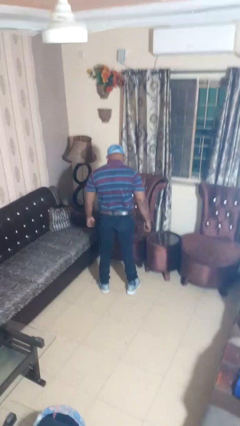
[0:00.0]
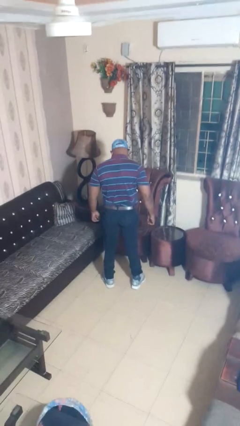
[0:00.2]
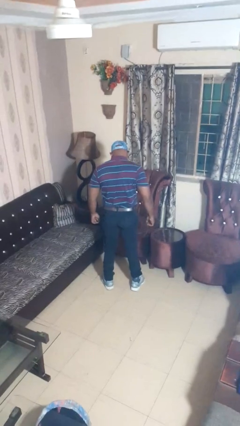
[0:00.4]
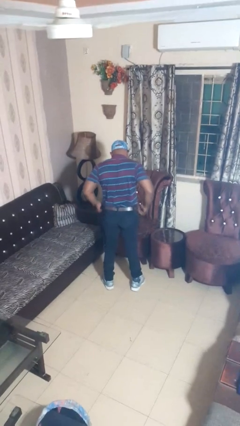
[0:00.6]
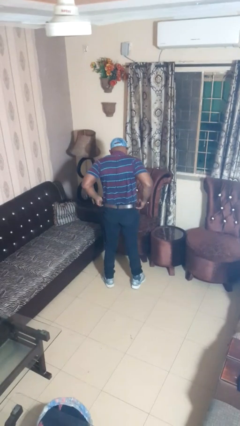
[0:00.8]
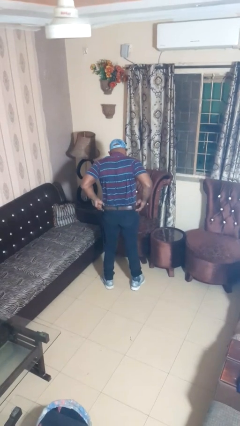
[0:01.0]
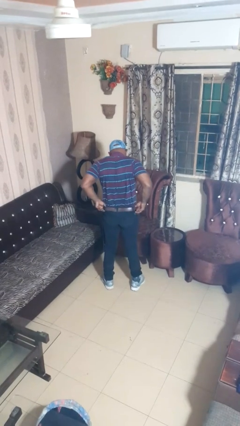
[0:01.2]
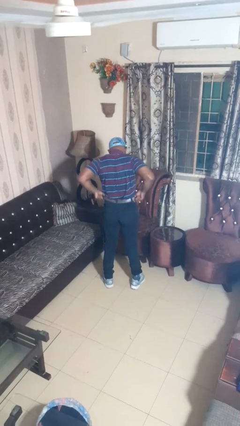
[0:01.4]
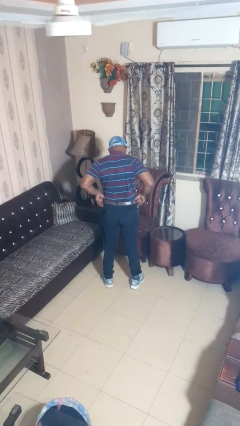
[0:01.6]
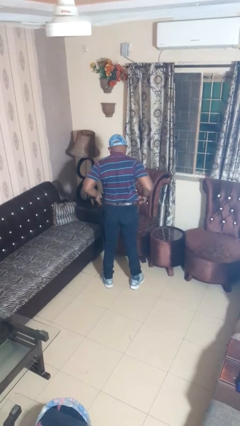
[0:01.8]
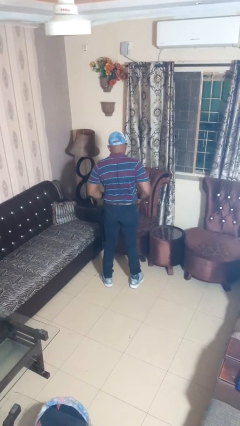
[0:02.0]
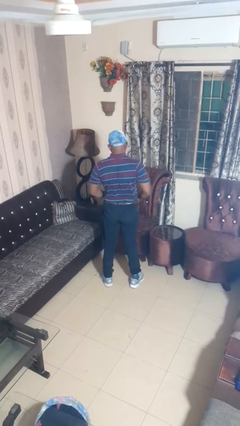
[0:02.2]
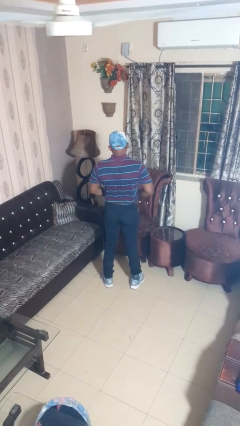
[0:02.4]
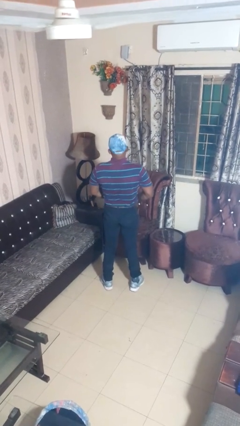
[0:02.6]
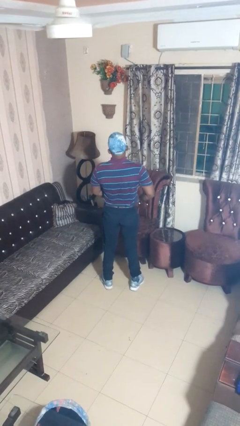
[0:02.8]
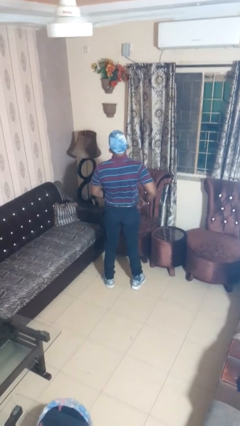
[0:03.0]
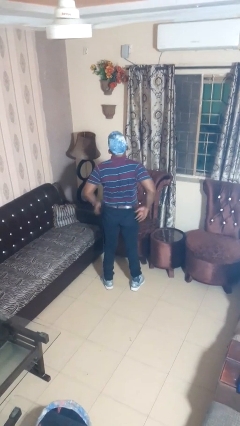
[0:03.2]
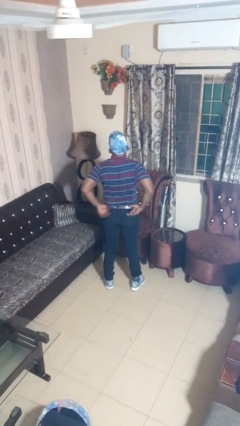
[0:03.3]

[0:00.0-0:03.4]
person hikes up pants

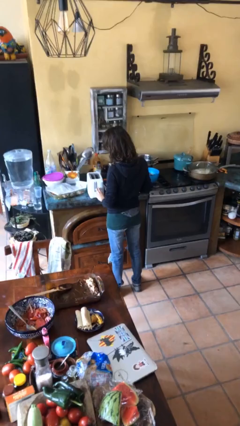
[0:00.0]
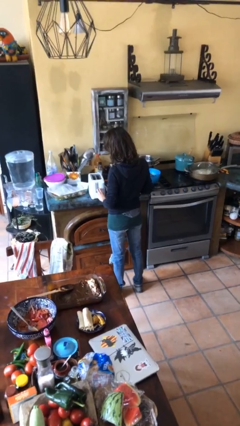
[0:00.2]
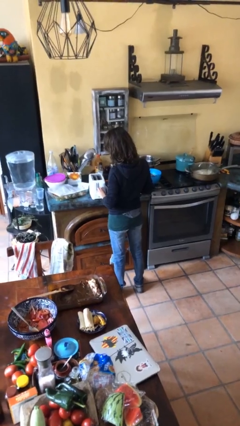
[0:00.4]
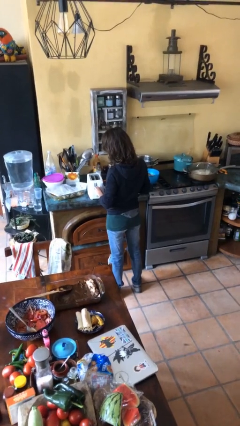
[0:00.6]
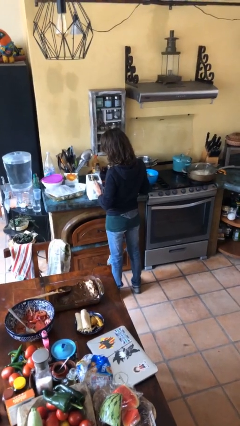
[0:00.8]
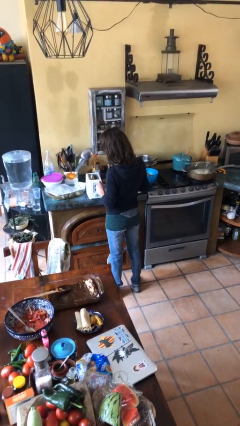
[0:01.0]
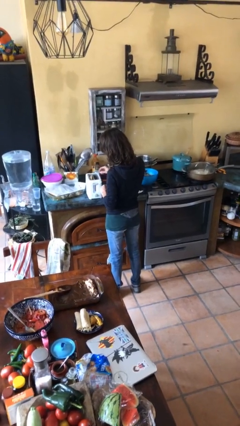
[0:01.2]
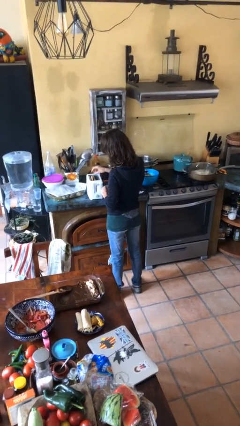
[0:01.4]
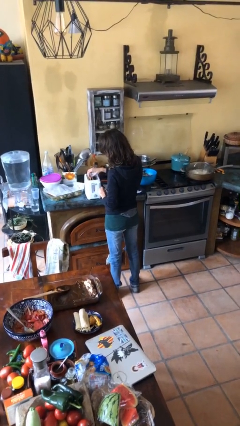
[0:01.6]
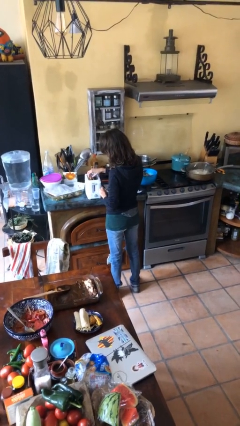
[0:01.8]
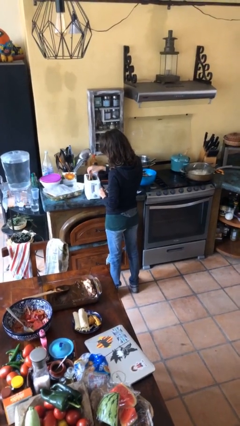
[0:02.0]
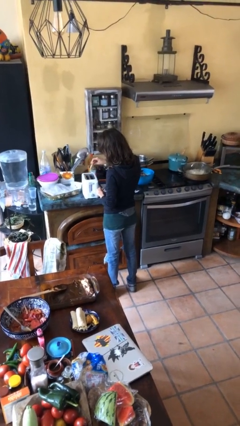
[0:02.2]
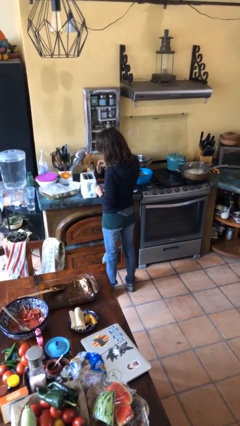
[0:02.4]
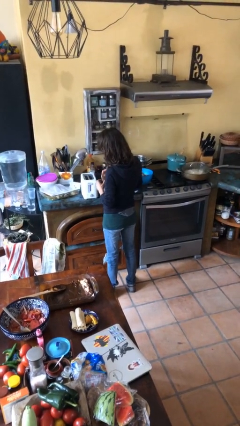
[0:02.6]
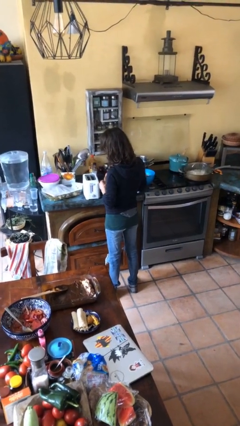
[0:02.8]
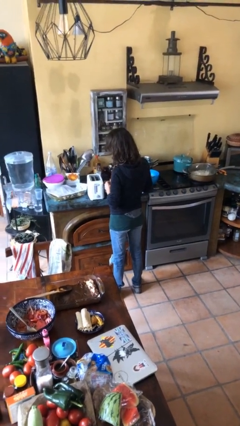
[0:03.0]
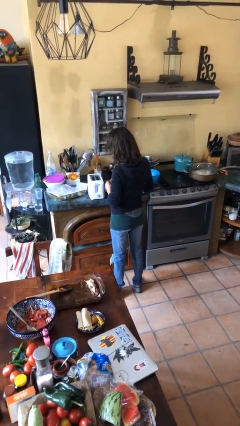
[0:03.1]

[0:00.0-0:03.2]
person takes object from toaster

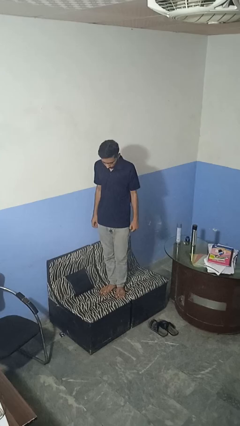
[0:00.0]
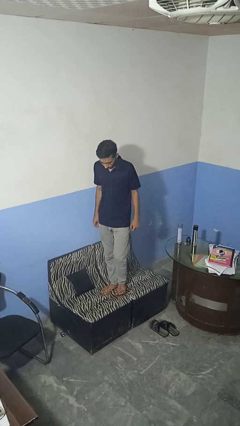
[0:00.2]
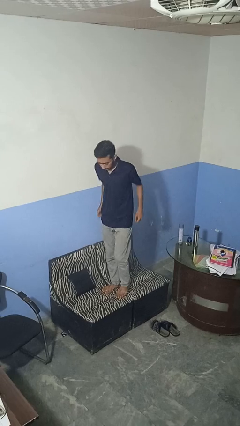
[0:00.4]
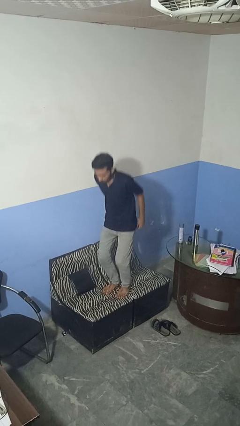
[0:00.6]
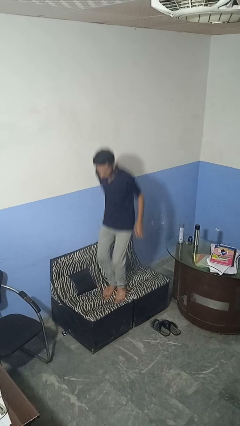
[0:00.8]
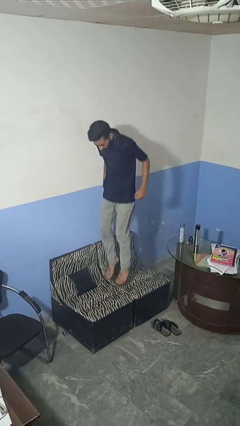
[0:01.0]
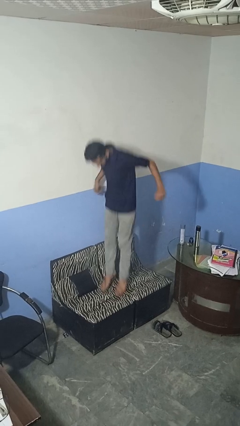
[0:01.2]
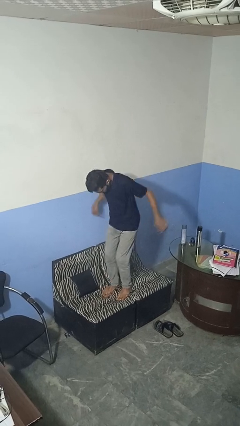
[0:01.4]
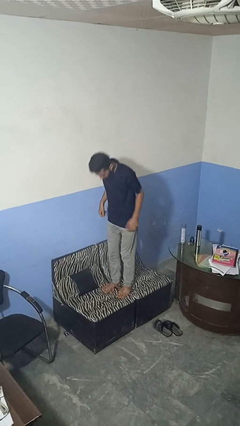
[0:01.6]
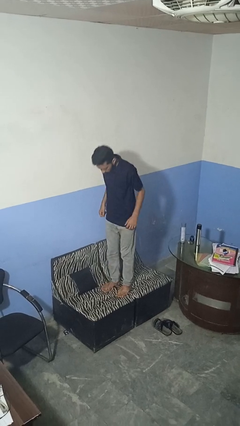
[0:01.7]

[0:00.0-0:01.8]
person jumps on couch

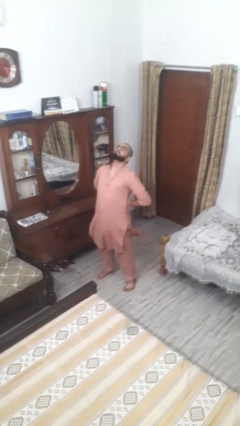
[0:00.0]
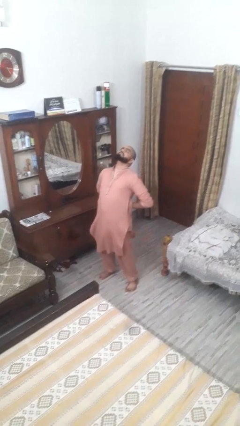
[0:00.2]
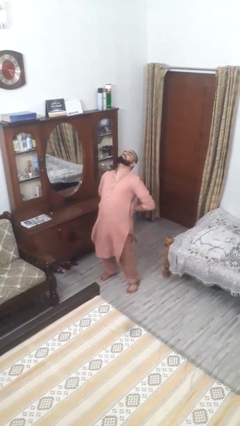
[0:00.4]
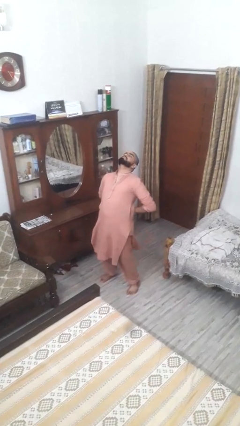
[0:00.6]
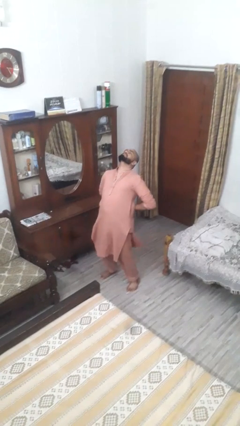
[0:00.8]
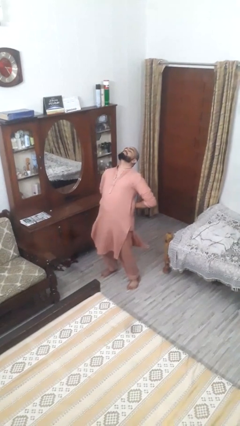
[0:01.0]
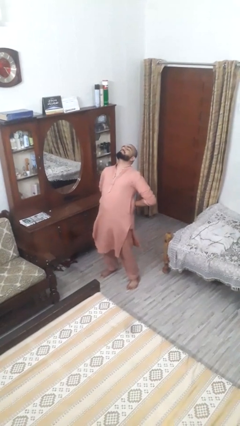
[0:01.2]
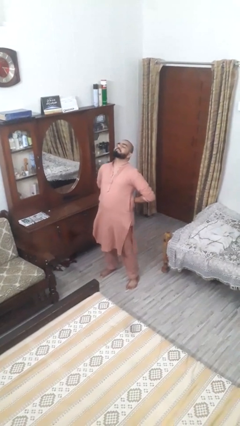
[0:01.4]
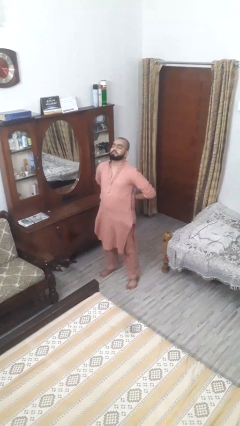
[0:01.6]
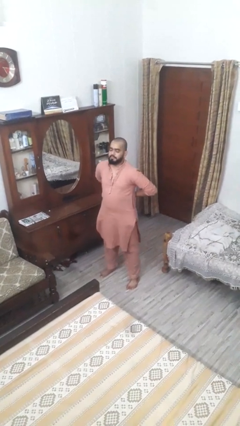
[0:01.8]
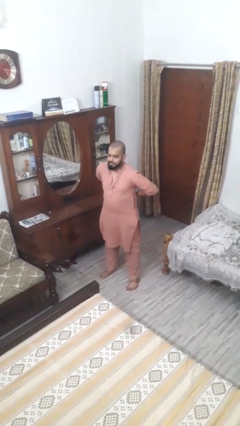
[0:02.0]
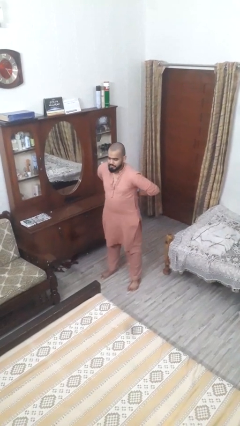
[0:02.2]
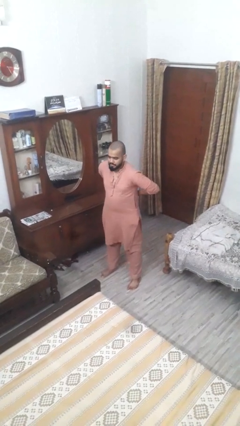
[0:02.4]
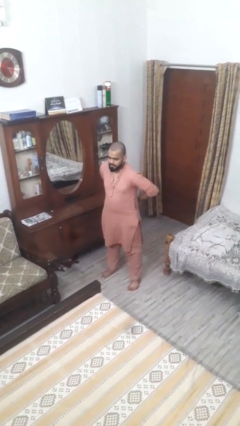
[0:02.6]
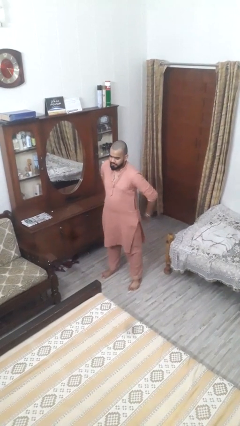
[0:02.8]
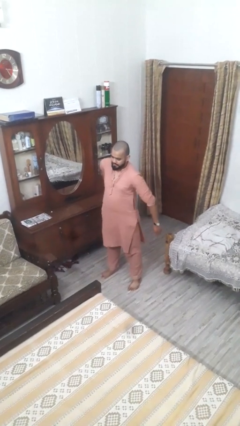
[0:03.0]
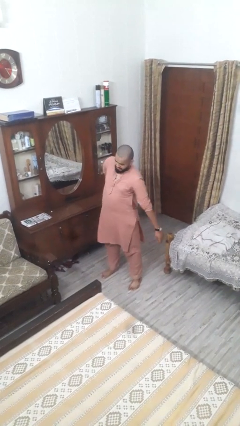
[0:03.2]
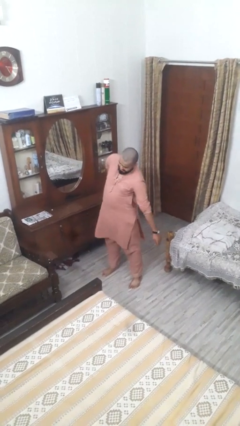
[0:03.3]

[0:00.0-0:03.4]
person stretches back

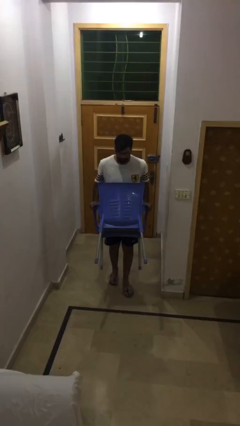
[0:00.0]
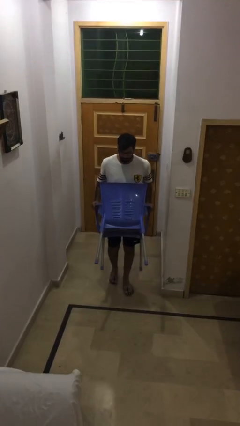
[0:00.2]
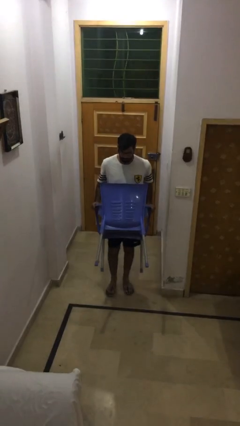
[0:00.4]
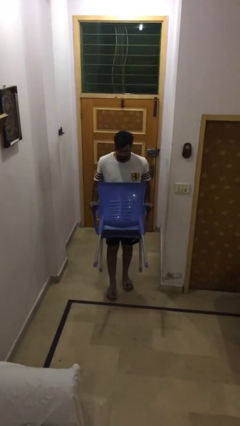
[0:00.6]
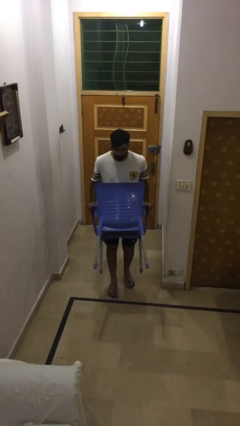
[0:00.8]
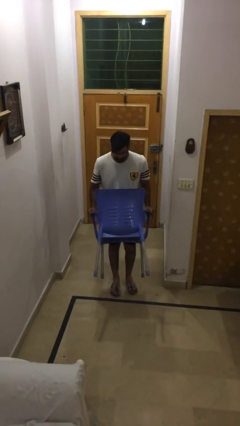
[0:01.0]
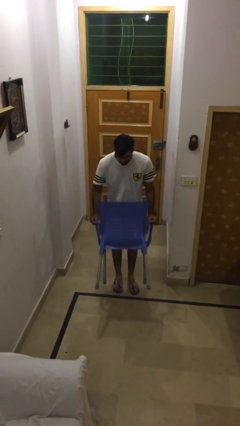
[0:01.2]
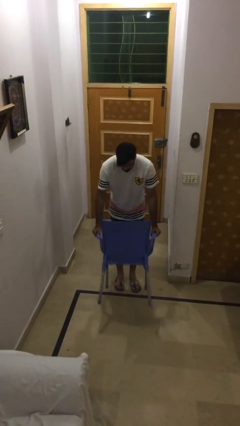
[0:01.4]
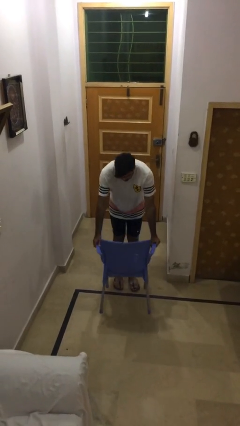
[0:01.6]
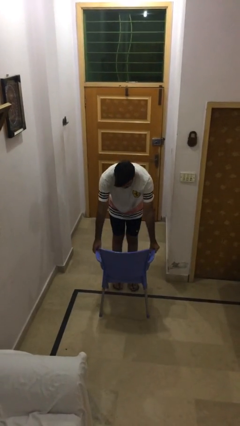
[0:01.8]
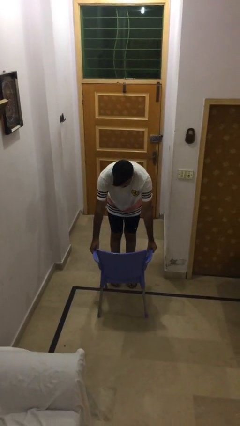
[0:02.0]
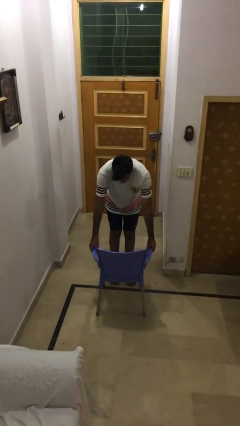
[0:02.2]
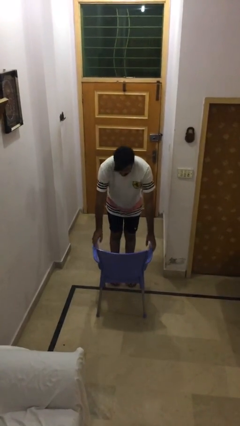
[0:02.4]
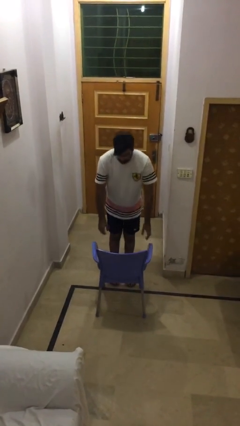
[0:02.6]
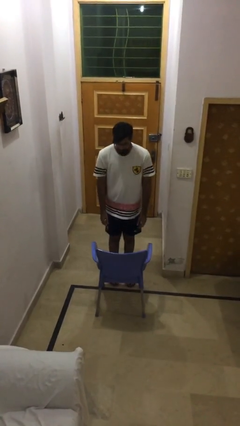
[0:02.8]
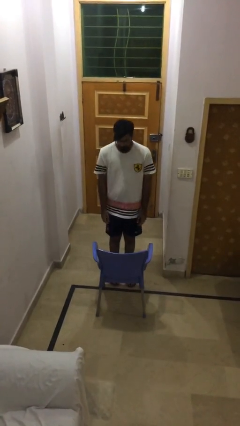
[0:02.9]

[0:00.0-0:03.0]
person puts down object on floor

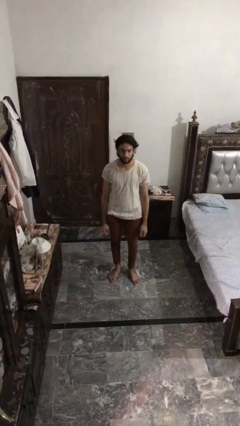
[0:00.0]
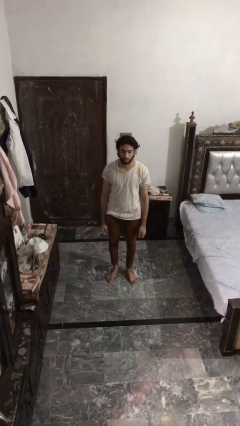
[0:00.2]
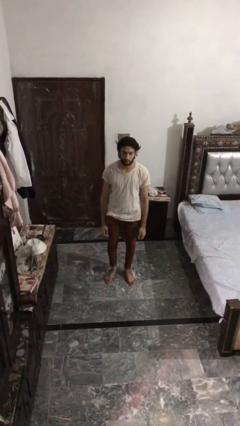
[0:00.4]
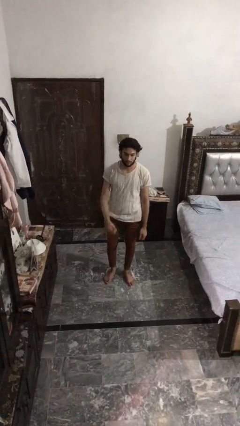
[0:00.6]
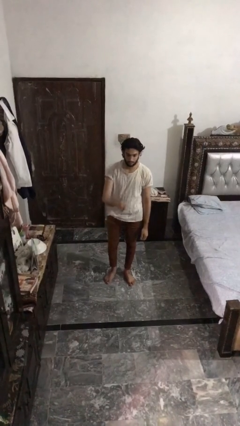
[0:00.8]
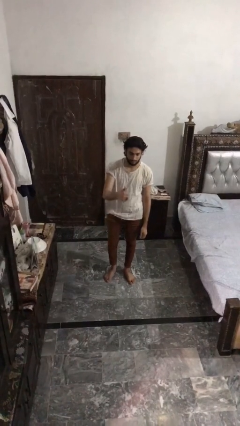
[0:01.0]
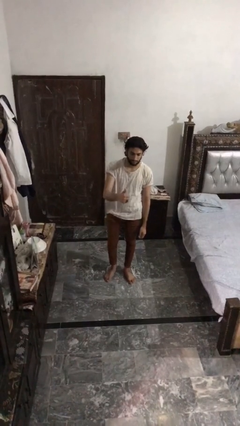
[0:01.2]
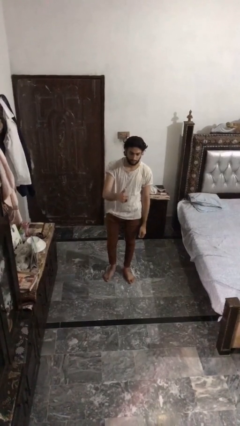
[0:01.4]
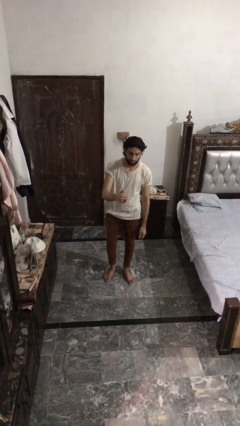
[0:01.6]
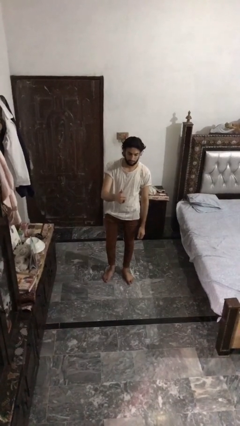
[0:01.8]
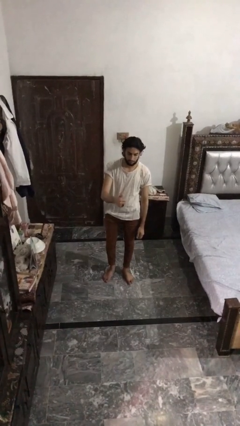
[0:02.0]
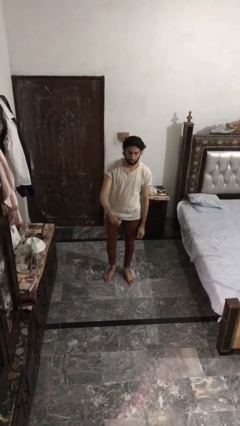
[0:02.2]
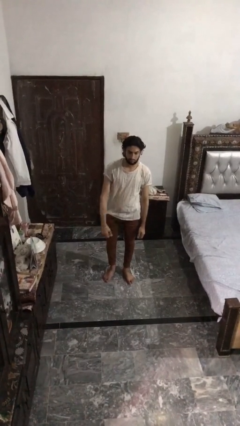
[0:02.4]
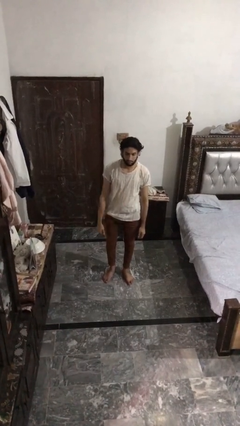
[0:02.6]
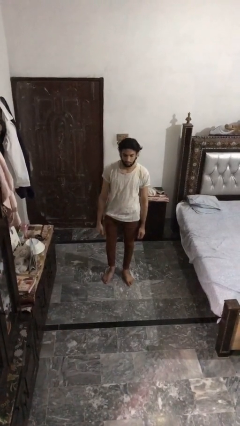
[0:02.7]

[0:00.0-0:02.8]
person gestures thumbs up
